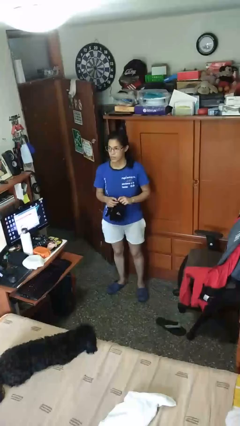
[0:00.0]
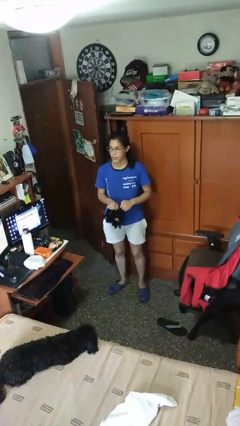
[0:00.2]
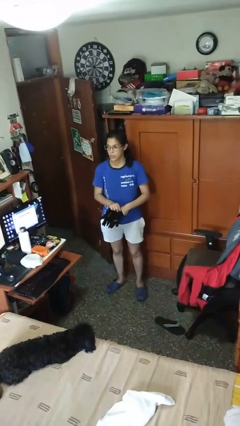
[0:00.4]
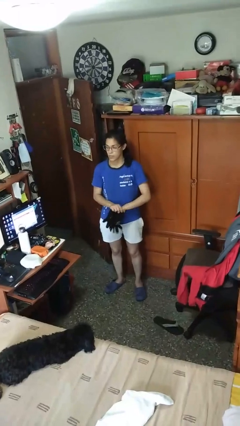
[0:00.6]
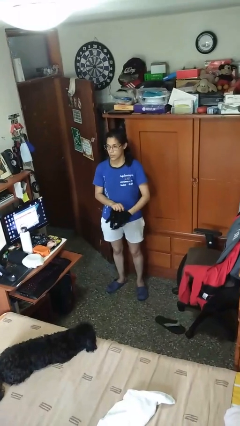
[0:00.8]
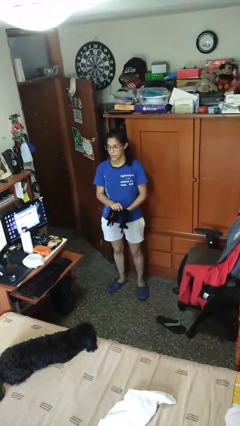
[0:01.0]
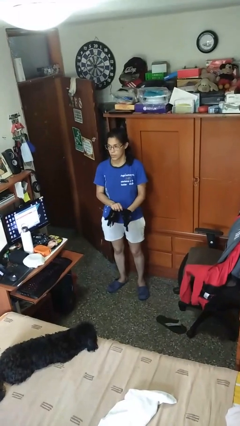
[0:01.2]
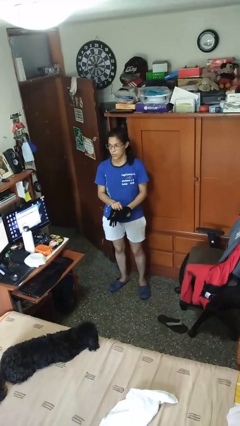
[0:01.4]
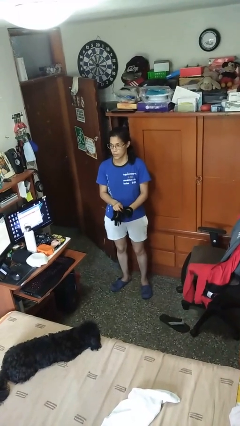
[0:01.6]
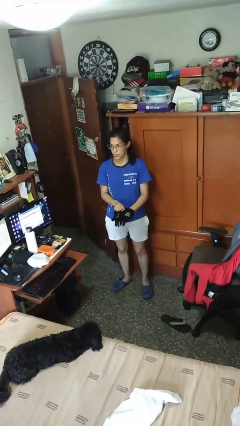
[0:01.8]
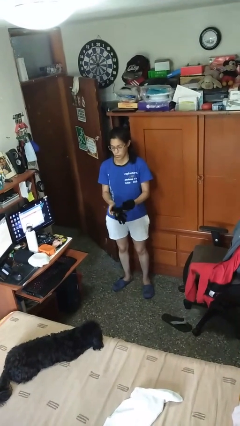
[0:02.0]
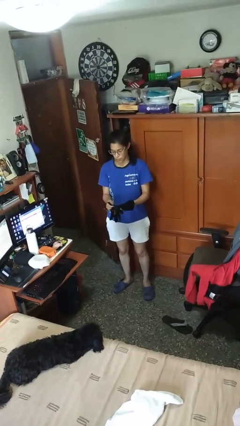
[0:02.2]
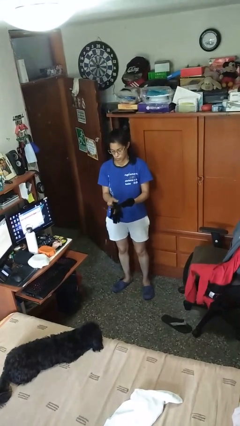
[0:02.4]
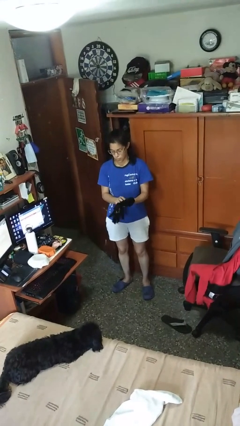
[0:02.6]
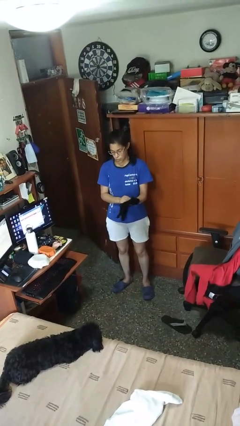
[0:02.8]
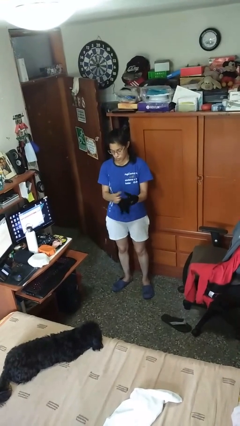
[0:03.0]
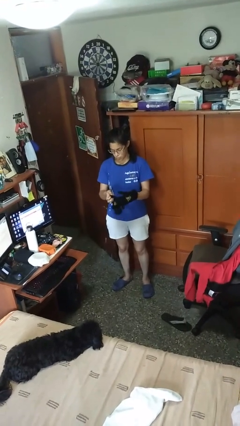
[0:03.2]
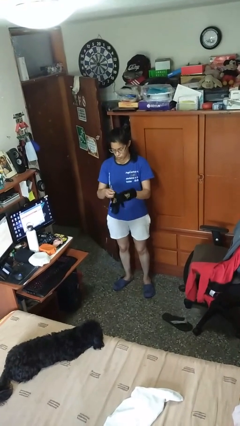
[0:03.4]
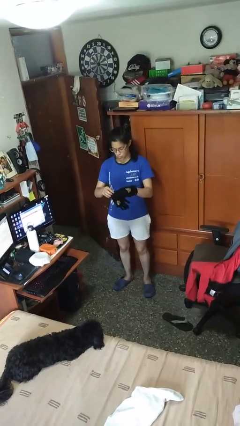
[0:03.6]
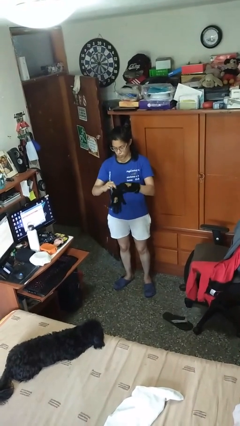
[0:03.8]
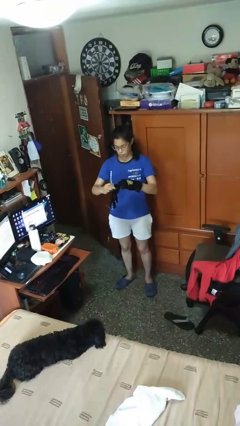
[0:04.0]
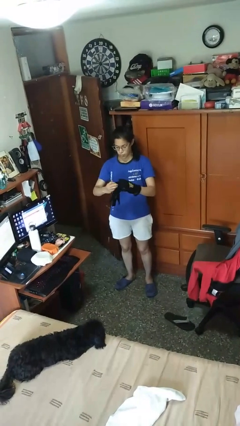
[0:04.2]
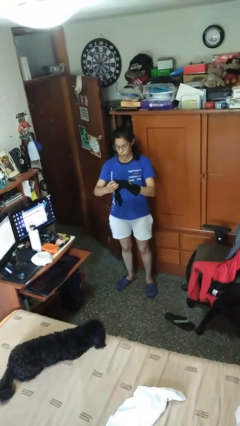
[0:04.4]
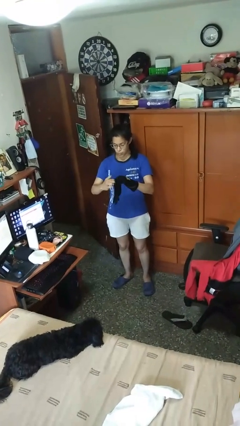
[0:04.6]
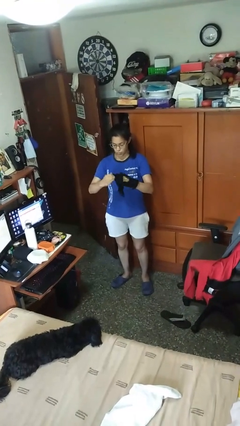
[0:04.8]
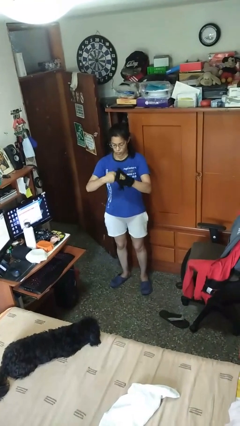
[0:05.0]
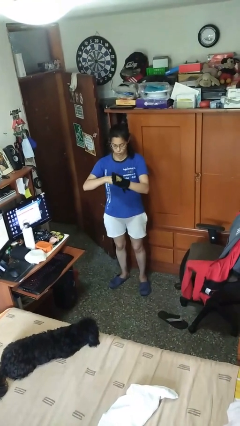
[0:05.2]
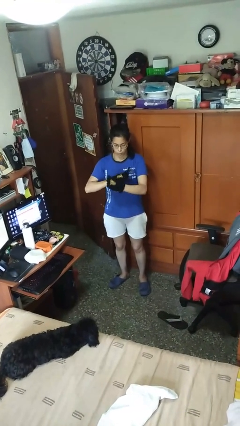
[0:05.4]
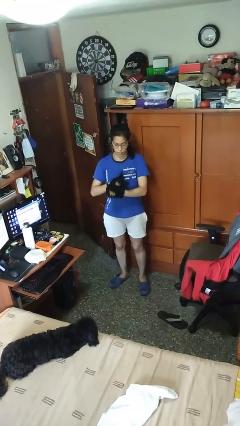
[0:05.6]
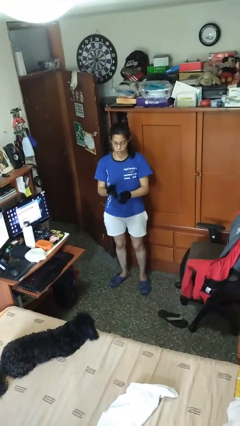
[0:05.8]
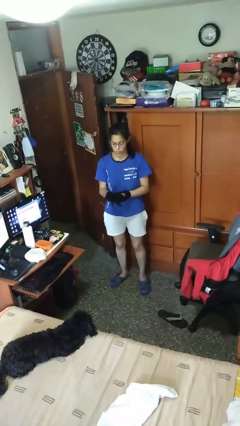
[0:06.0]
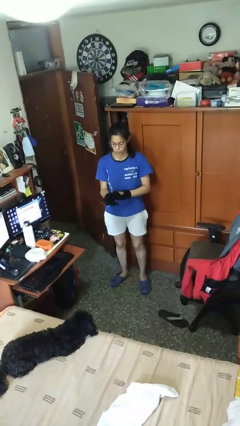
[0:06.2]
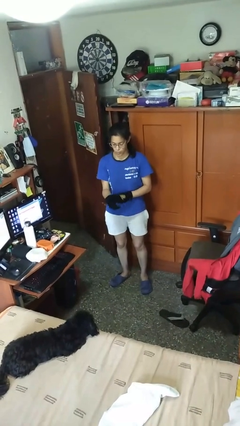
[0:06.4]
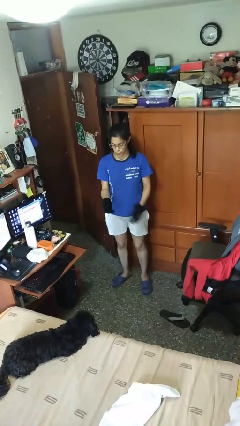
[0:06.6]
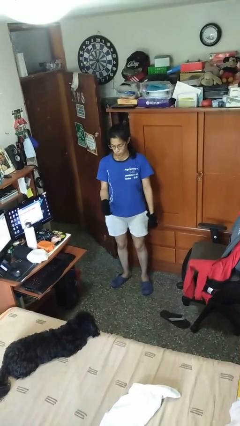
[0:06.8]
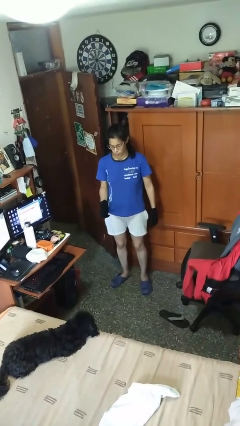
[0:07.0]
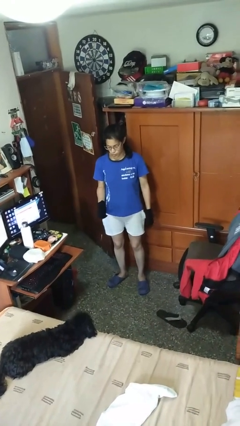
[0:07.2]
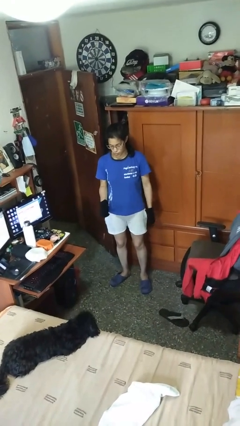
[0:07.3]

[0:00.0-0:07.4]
person puts on gloves

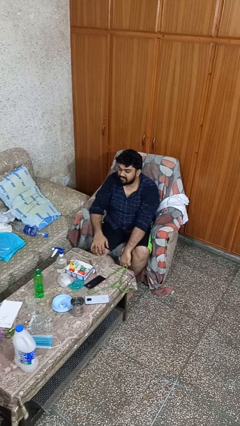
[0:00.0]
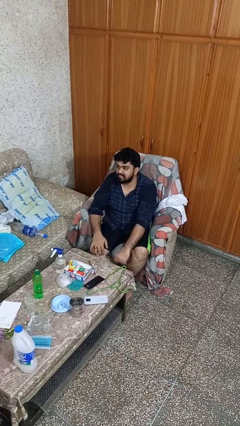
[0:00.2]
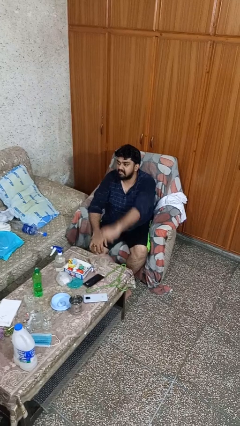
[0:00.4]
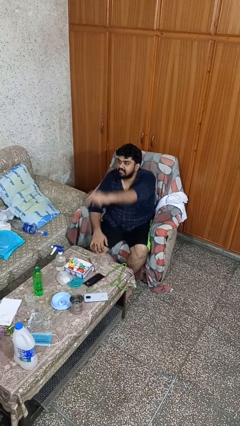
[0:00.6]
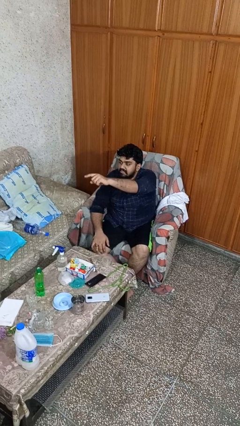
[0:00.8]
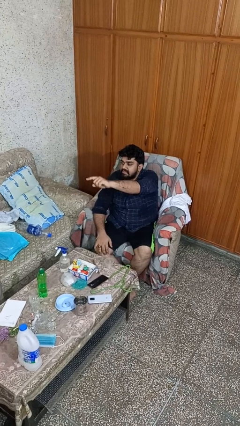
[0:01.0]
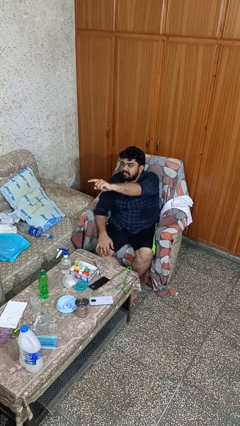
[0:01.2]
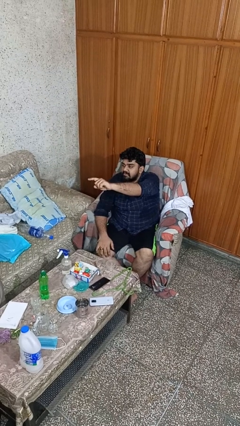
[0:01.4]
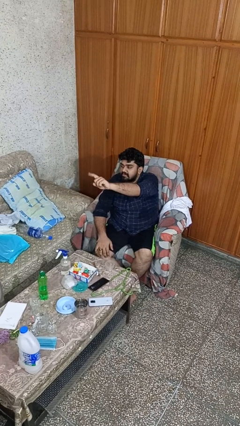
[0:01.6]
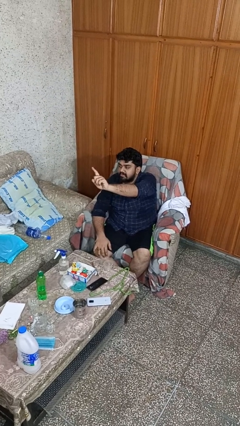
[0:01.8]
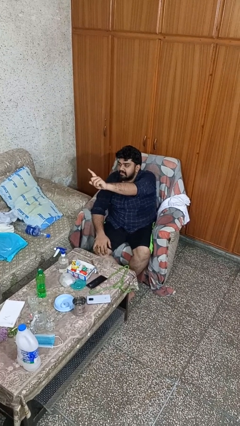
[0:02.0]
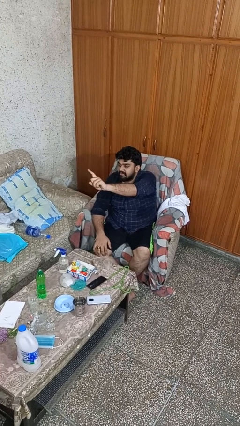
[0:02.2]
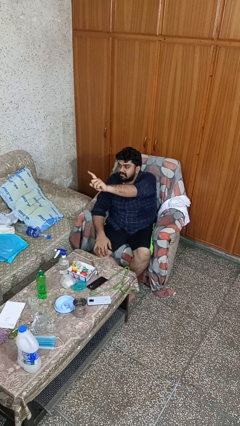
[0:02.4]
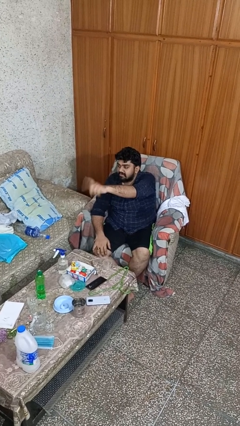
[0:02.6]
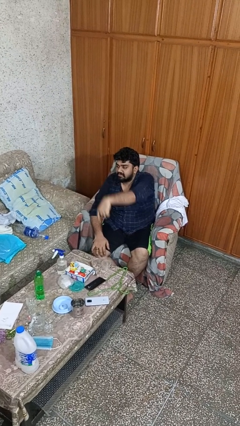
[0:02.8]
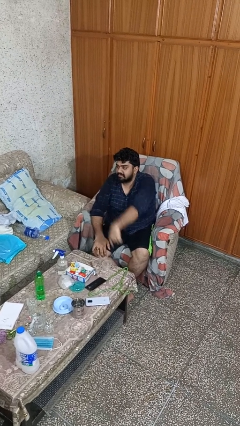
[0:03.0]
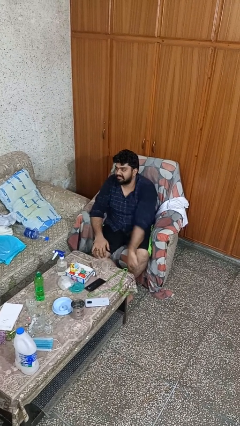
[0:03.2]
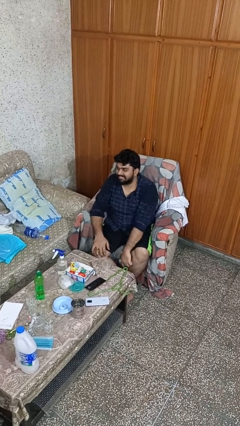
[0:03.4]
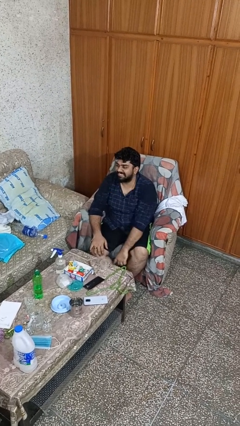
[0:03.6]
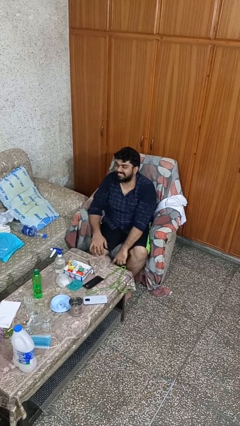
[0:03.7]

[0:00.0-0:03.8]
person points at person

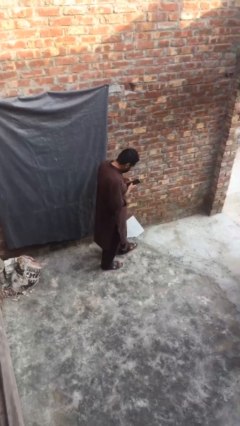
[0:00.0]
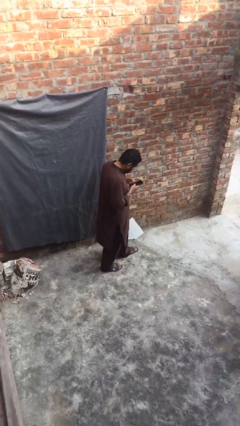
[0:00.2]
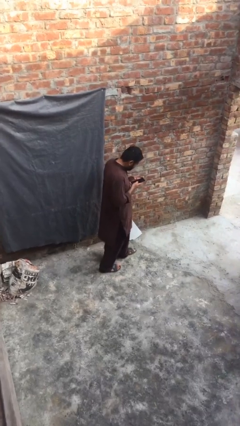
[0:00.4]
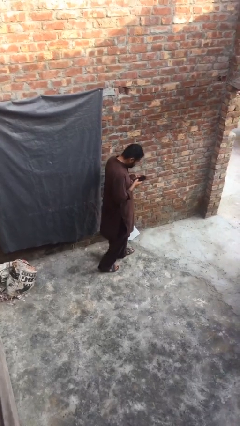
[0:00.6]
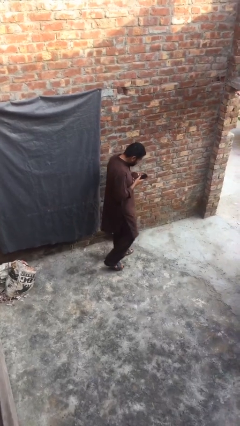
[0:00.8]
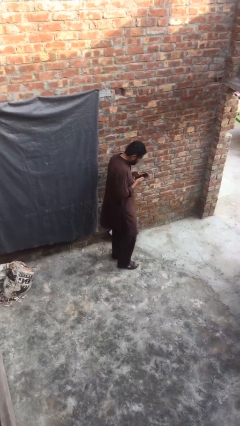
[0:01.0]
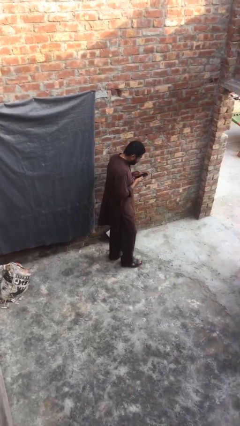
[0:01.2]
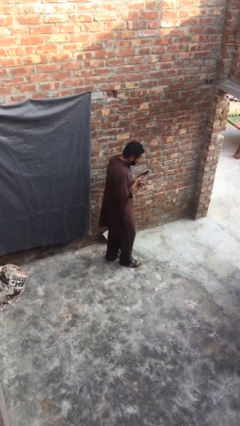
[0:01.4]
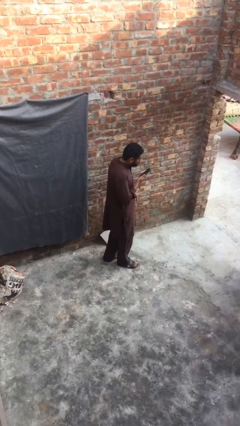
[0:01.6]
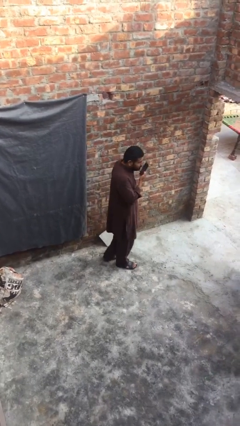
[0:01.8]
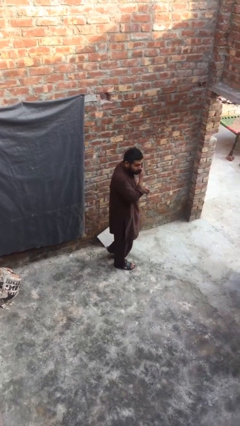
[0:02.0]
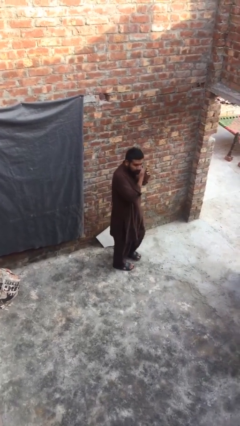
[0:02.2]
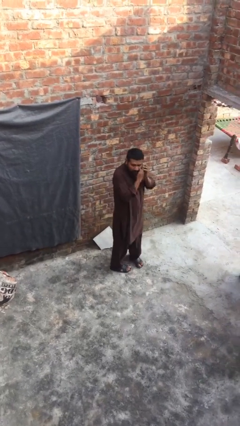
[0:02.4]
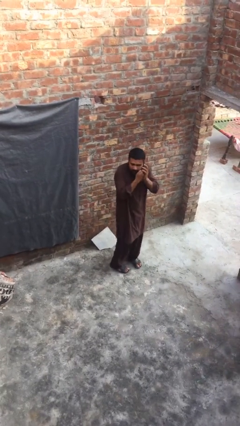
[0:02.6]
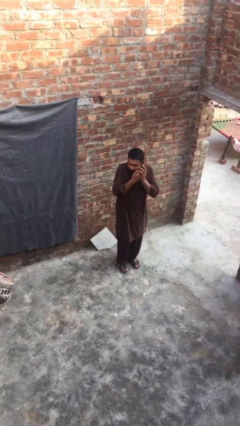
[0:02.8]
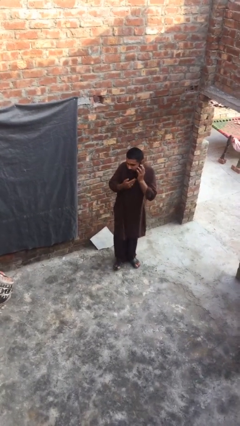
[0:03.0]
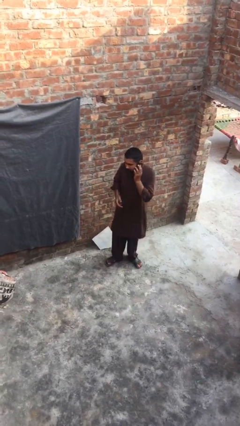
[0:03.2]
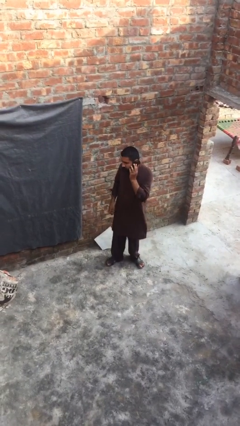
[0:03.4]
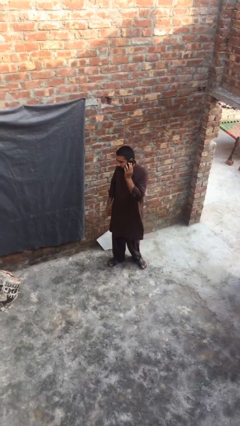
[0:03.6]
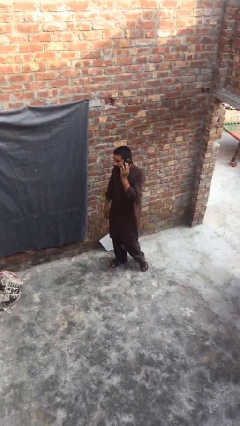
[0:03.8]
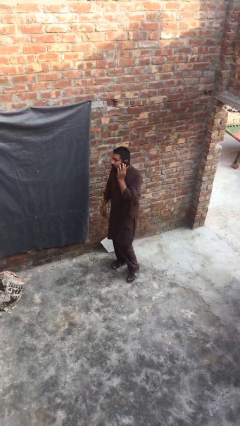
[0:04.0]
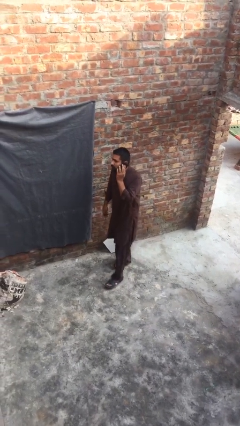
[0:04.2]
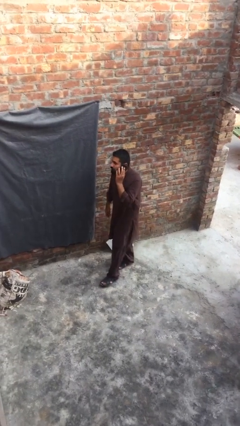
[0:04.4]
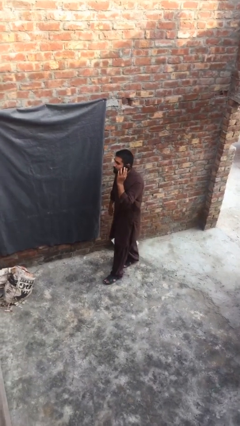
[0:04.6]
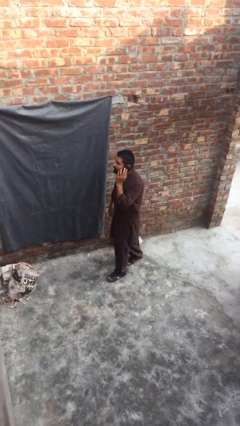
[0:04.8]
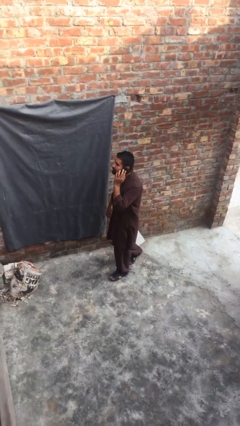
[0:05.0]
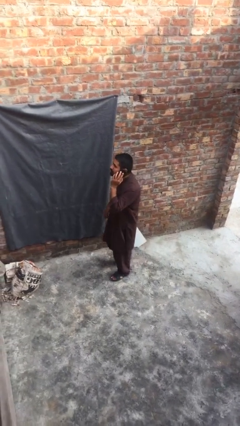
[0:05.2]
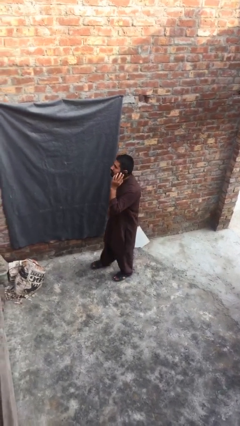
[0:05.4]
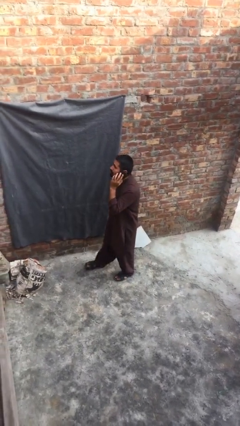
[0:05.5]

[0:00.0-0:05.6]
person talks on phone

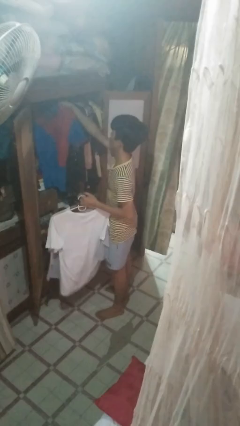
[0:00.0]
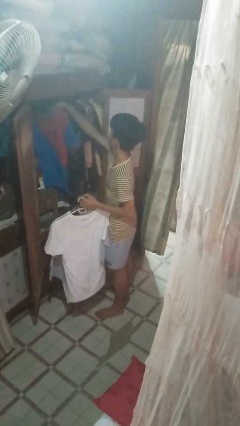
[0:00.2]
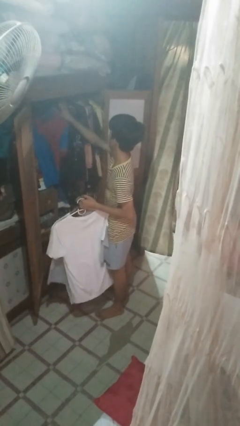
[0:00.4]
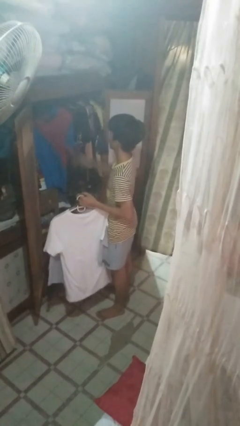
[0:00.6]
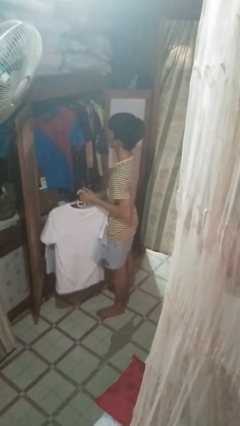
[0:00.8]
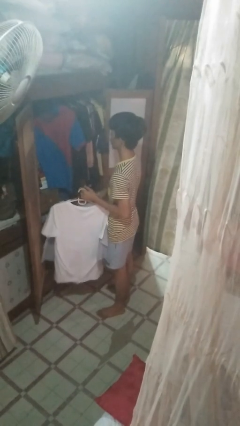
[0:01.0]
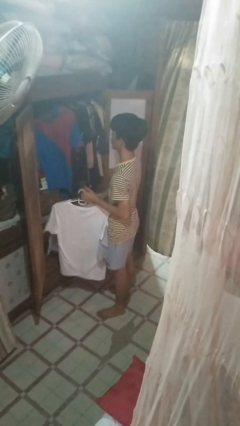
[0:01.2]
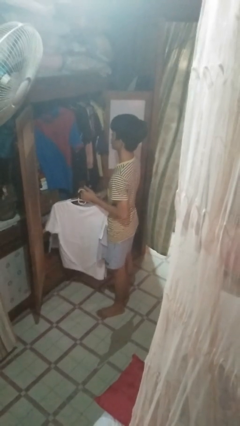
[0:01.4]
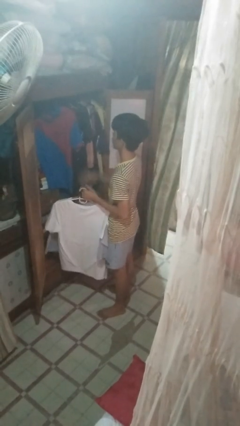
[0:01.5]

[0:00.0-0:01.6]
person puts clothes into closet
